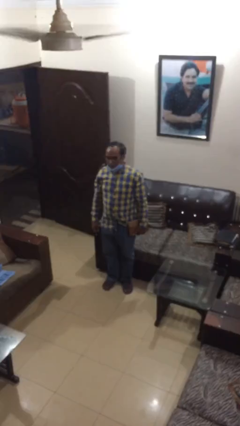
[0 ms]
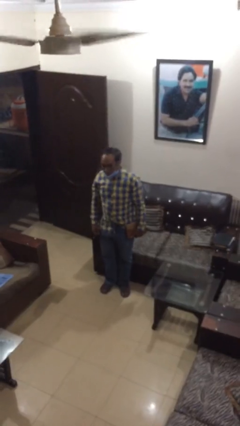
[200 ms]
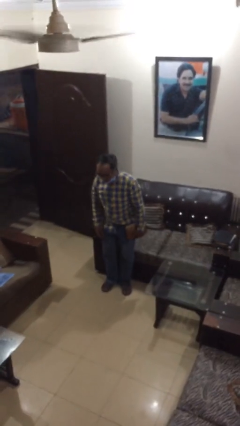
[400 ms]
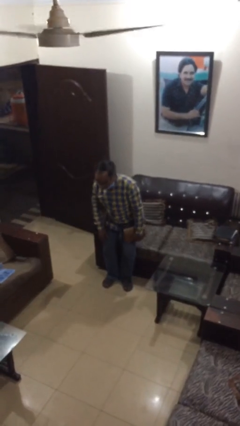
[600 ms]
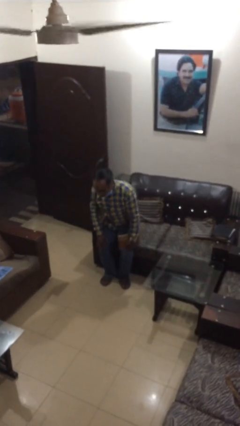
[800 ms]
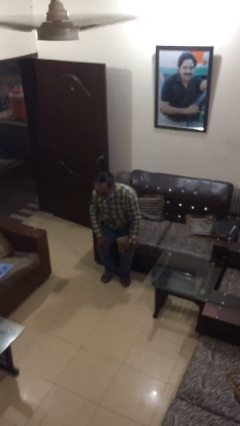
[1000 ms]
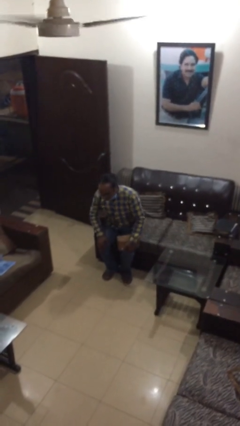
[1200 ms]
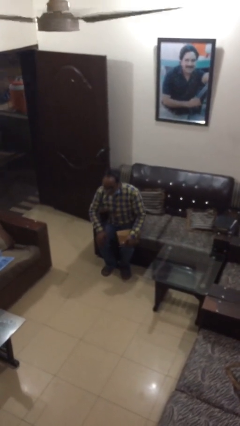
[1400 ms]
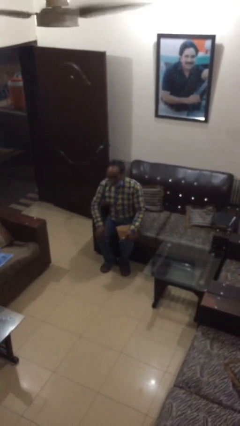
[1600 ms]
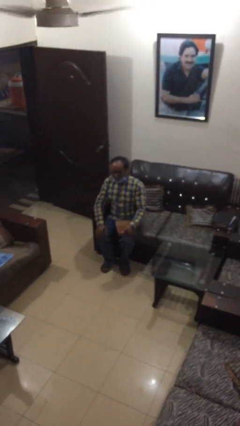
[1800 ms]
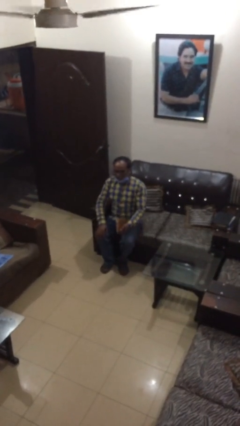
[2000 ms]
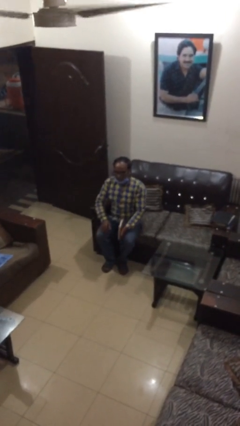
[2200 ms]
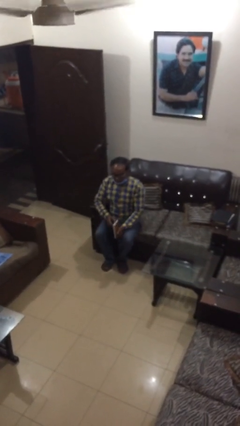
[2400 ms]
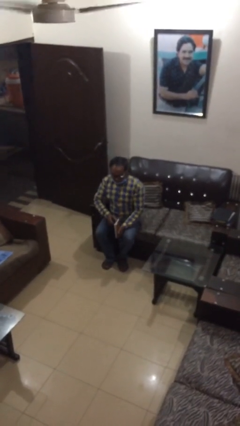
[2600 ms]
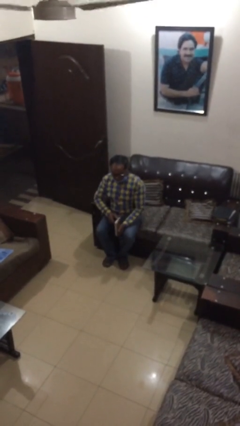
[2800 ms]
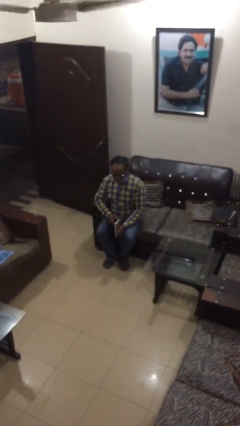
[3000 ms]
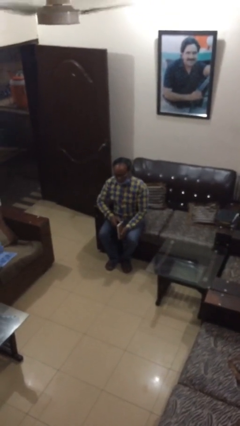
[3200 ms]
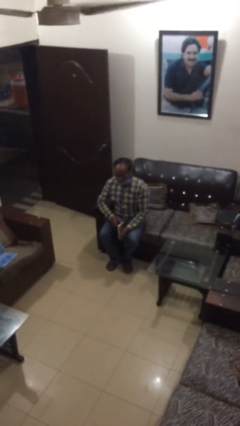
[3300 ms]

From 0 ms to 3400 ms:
person sits down

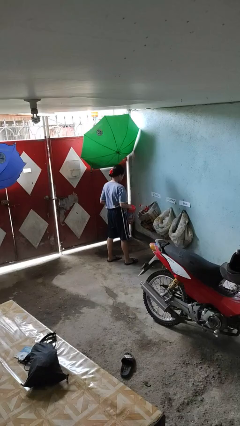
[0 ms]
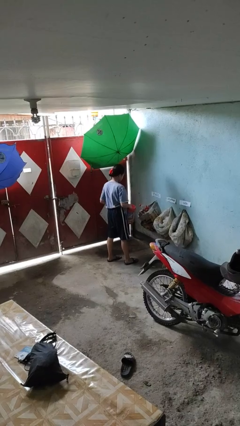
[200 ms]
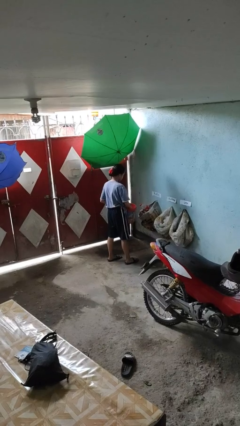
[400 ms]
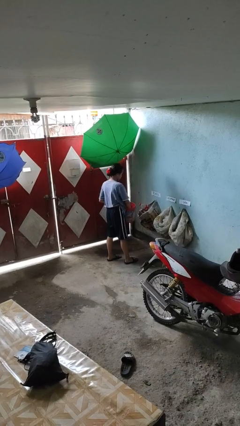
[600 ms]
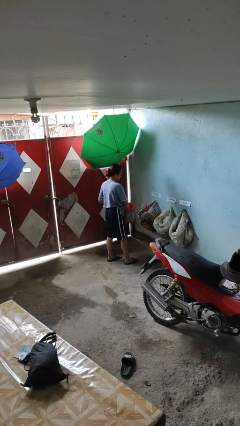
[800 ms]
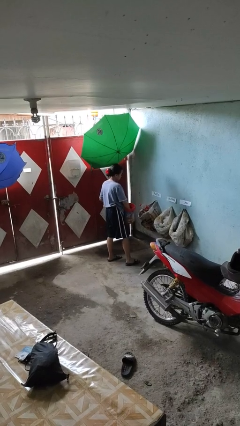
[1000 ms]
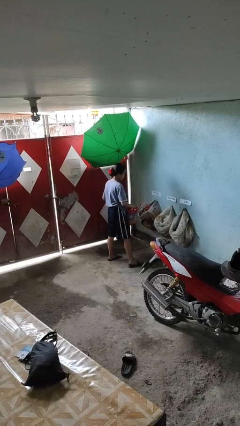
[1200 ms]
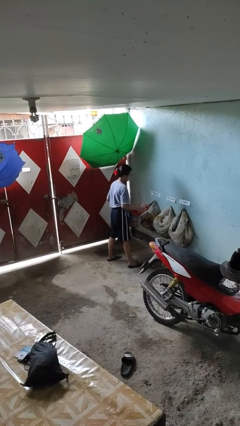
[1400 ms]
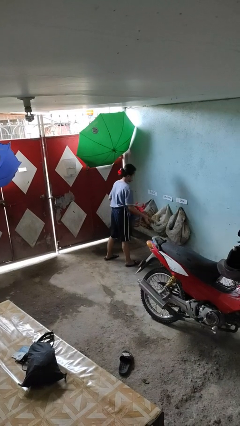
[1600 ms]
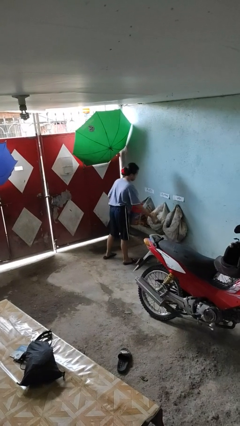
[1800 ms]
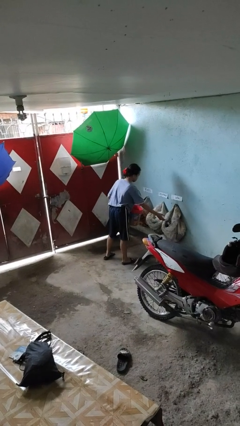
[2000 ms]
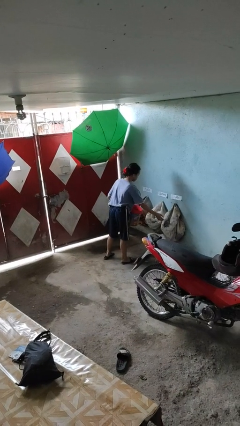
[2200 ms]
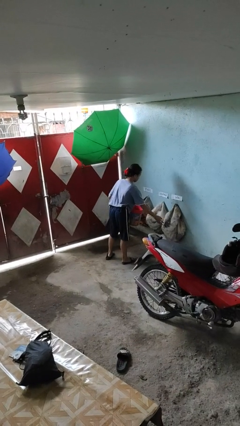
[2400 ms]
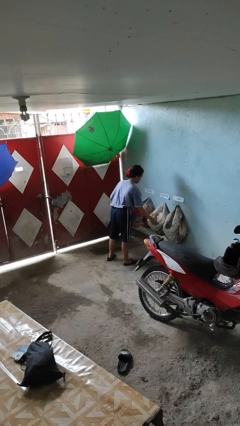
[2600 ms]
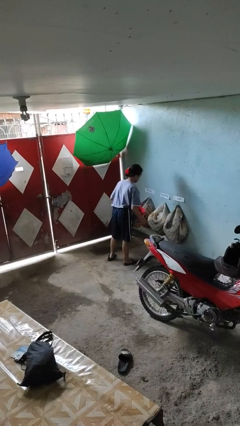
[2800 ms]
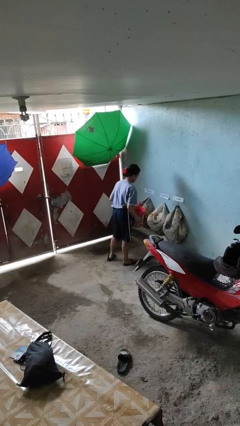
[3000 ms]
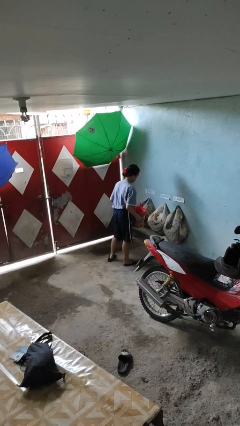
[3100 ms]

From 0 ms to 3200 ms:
person discards trash

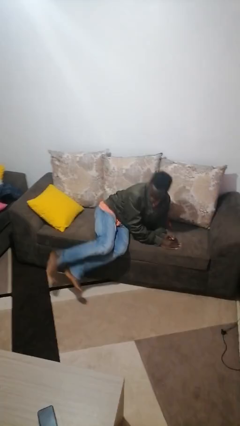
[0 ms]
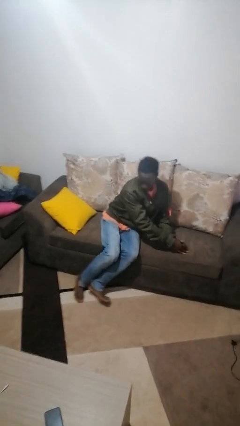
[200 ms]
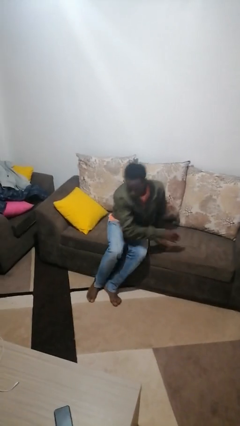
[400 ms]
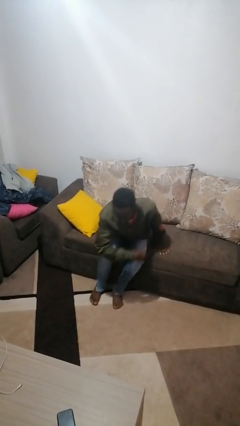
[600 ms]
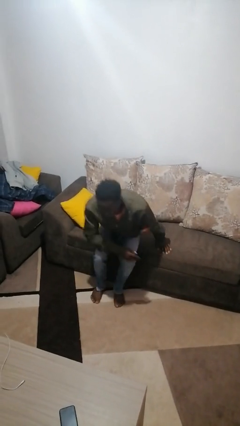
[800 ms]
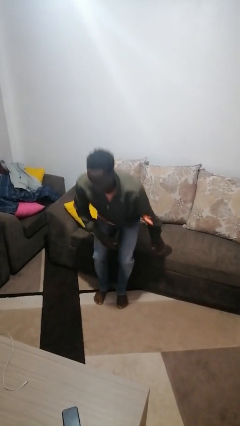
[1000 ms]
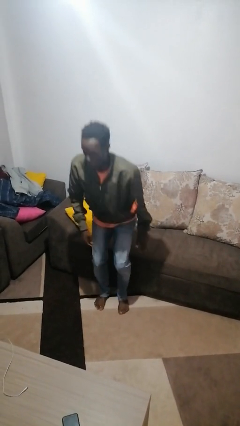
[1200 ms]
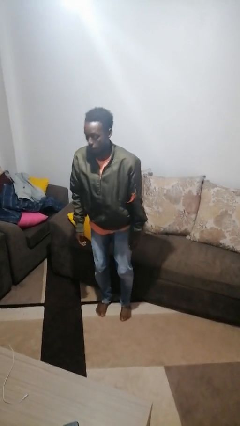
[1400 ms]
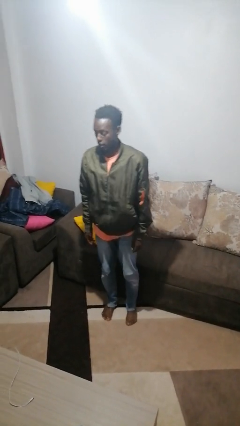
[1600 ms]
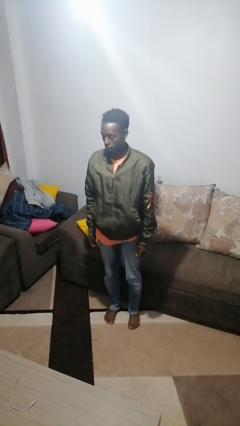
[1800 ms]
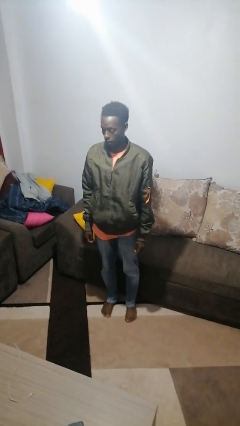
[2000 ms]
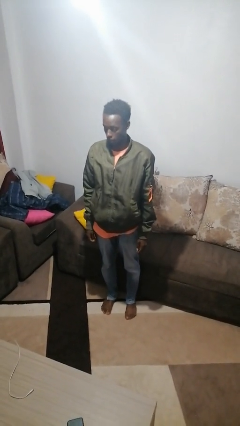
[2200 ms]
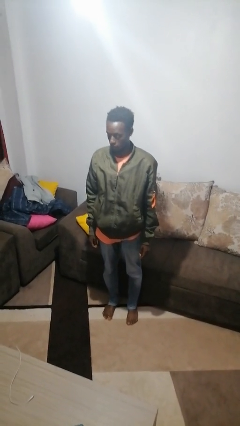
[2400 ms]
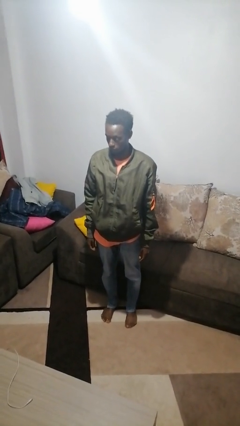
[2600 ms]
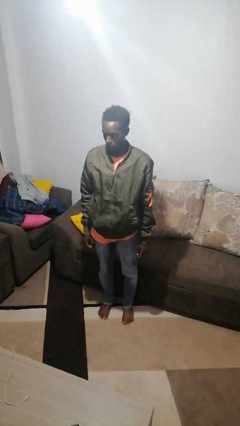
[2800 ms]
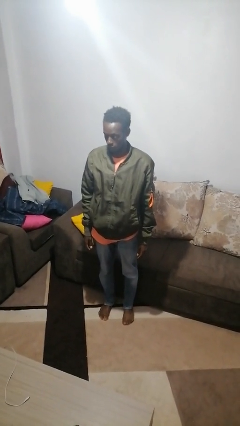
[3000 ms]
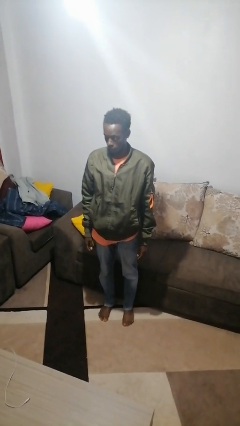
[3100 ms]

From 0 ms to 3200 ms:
person stands up

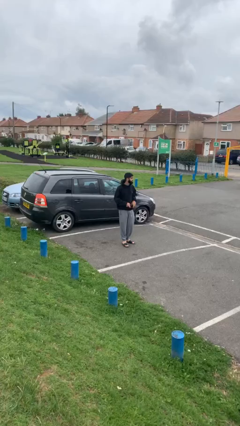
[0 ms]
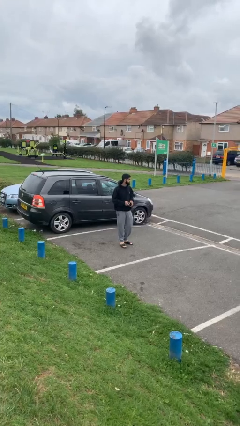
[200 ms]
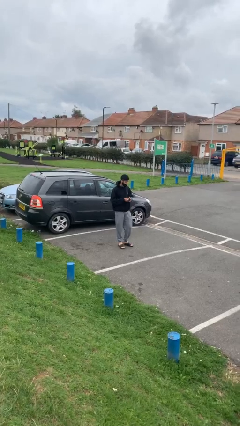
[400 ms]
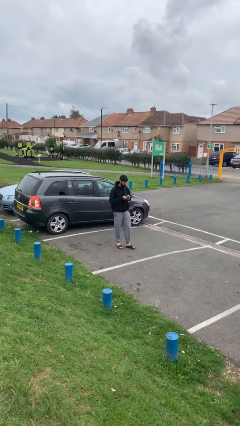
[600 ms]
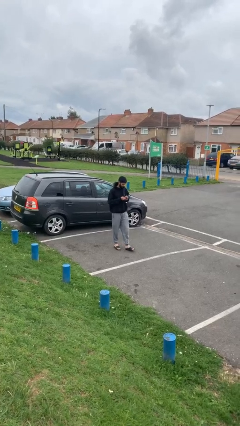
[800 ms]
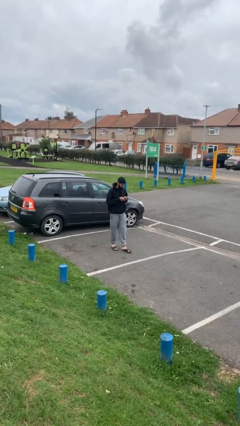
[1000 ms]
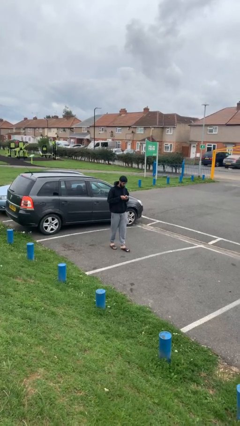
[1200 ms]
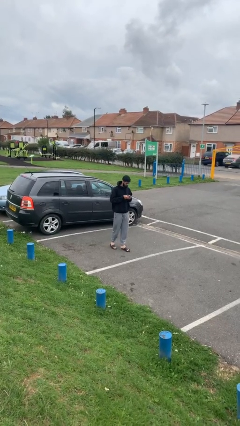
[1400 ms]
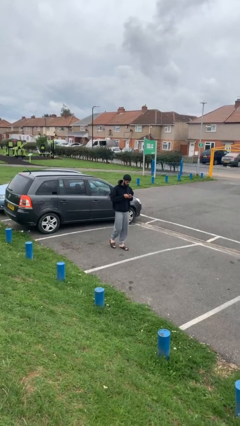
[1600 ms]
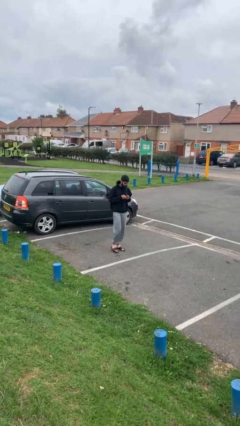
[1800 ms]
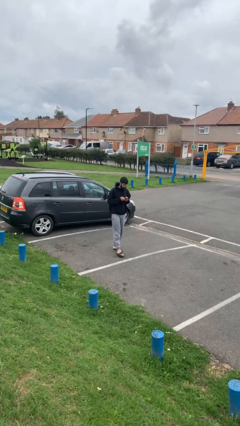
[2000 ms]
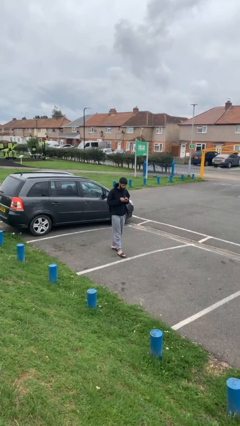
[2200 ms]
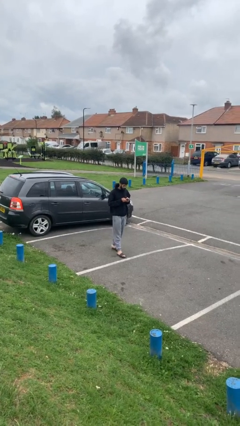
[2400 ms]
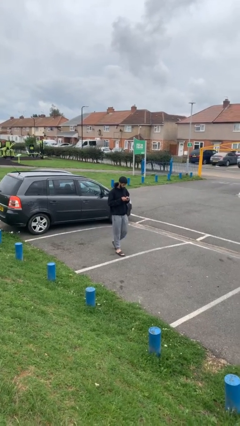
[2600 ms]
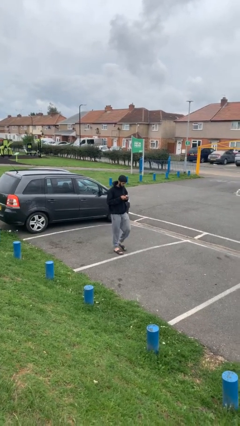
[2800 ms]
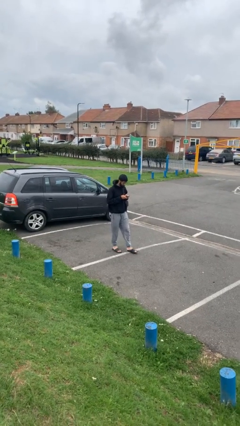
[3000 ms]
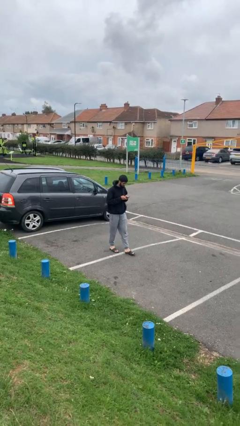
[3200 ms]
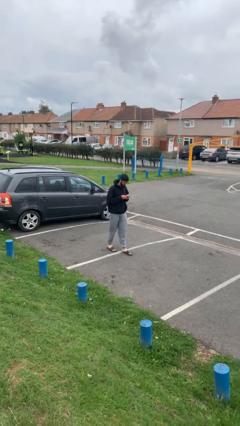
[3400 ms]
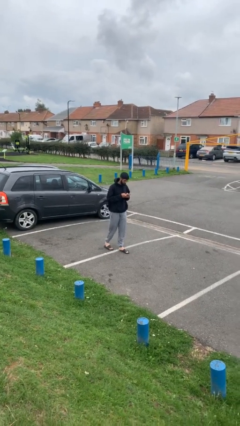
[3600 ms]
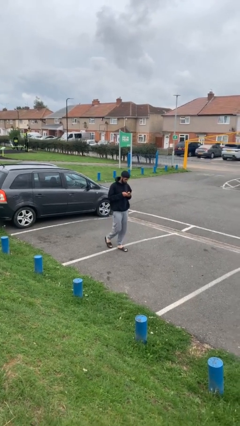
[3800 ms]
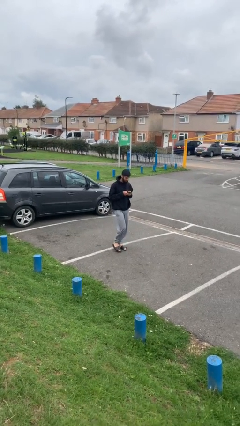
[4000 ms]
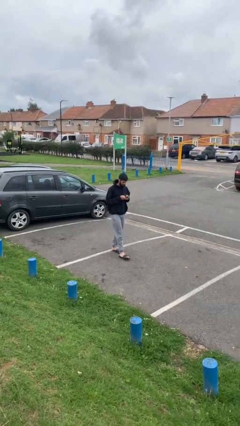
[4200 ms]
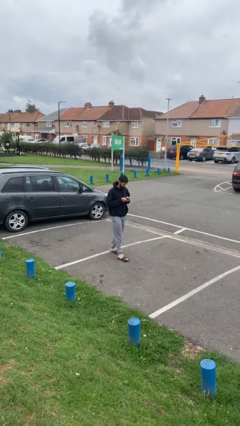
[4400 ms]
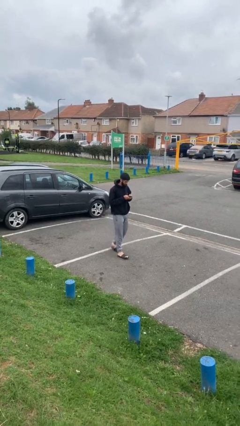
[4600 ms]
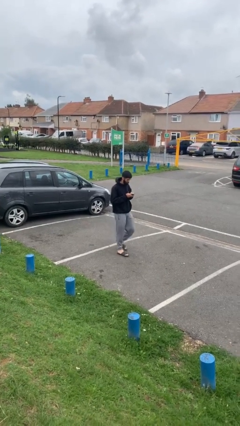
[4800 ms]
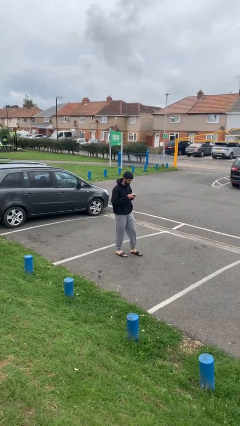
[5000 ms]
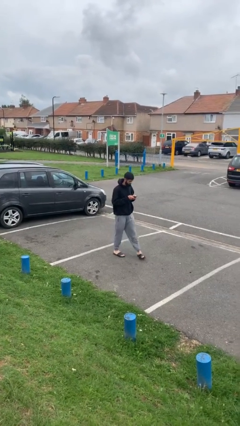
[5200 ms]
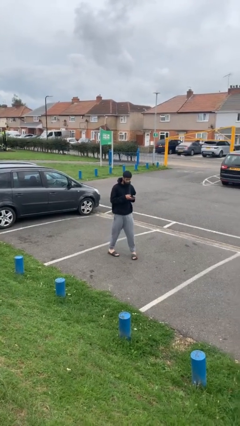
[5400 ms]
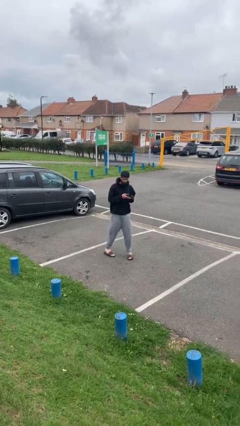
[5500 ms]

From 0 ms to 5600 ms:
person texts on phone

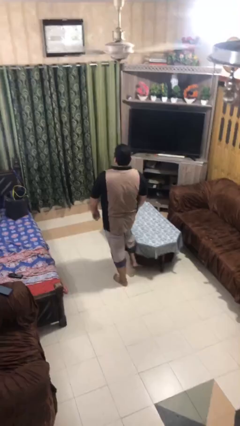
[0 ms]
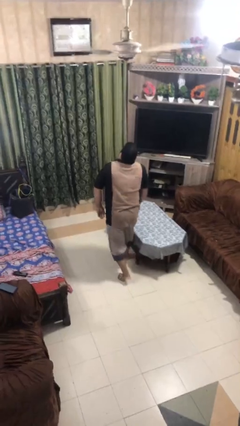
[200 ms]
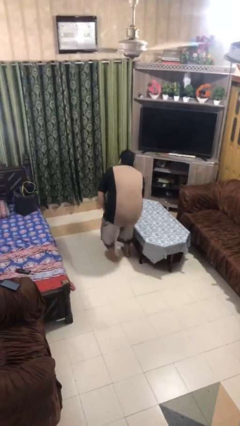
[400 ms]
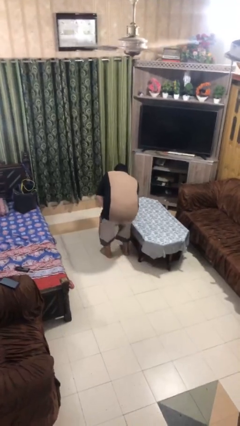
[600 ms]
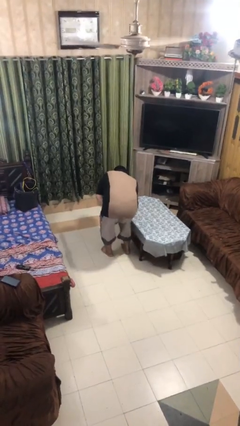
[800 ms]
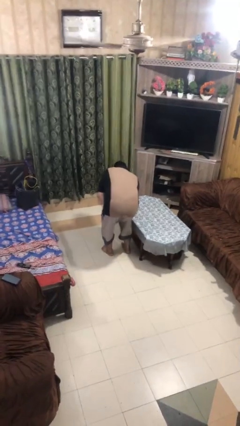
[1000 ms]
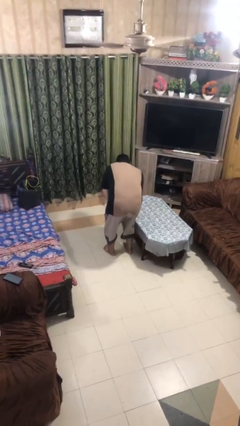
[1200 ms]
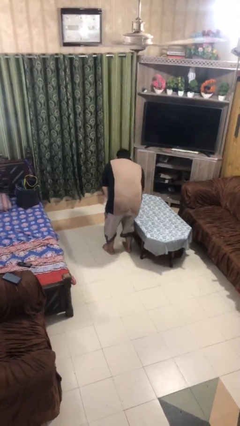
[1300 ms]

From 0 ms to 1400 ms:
person bumps into table

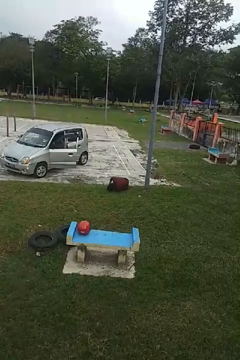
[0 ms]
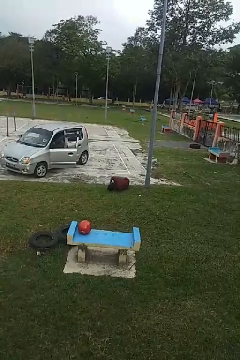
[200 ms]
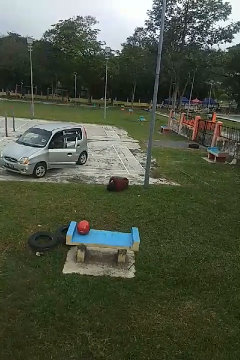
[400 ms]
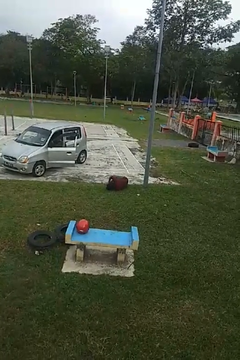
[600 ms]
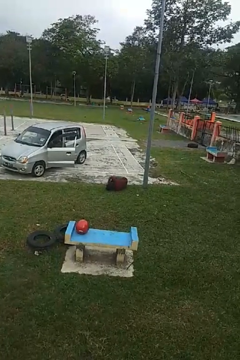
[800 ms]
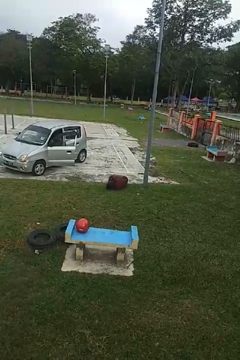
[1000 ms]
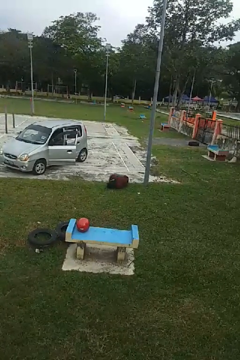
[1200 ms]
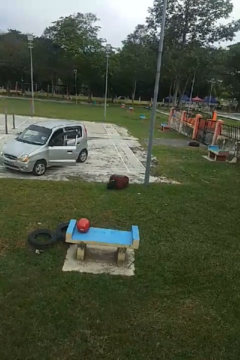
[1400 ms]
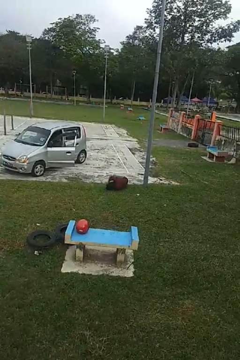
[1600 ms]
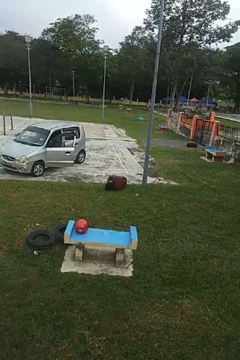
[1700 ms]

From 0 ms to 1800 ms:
person lies down on floor
